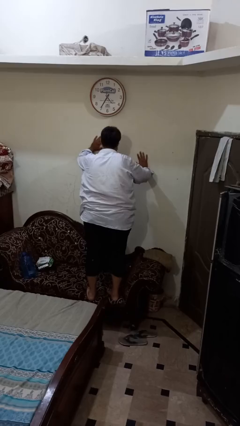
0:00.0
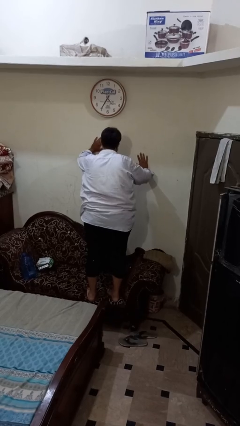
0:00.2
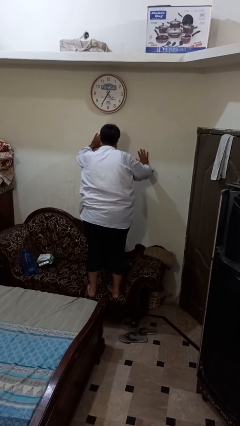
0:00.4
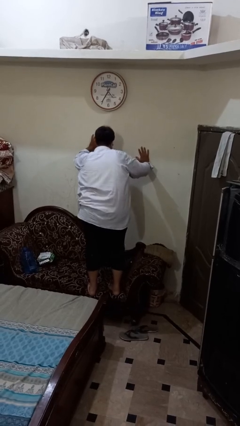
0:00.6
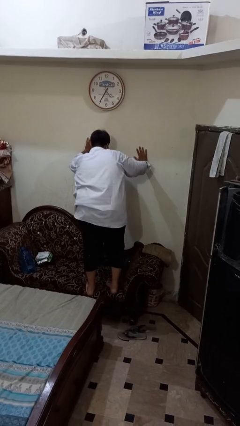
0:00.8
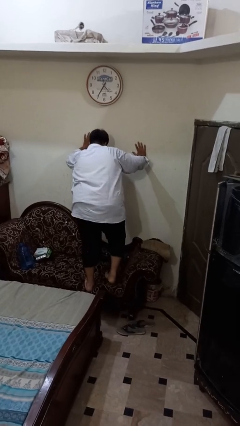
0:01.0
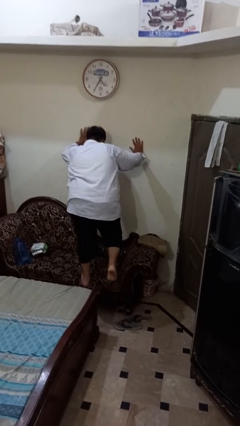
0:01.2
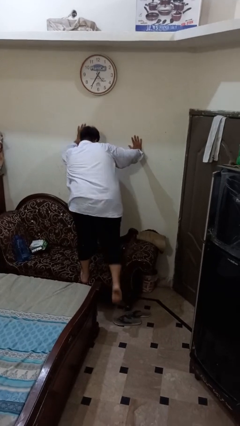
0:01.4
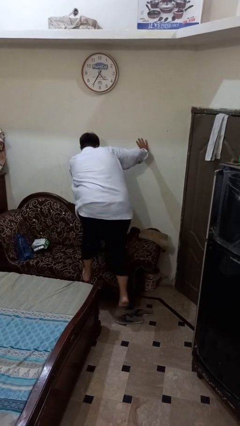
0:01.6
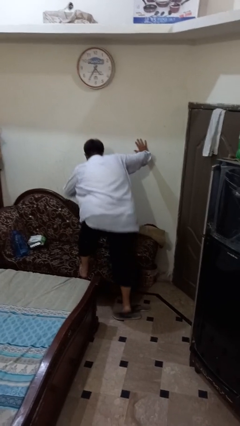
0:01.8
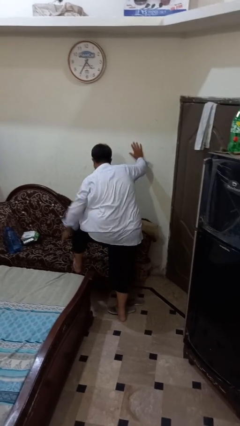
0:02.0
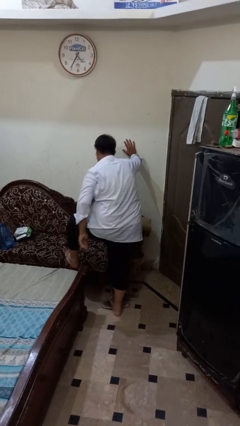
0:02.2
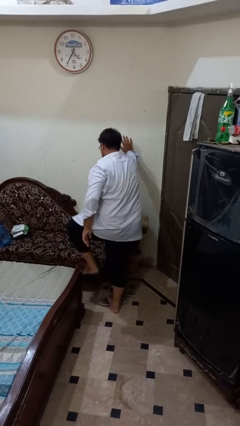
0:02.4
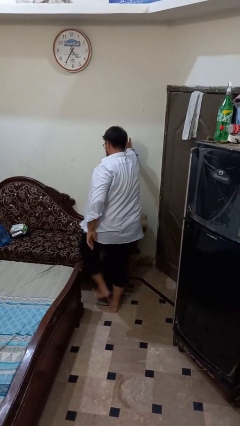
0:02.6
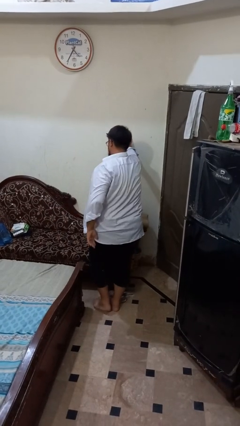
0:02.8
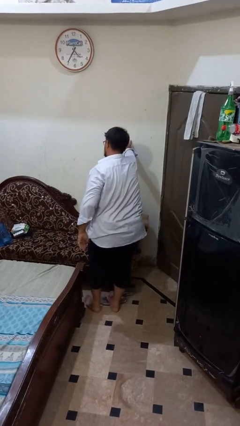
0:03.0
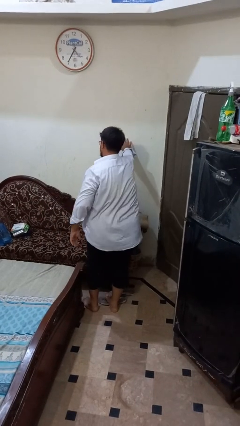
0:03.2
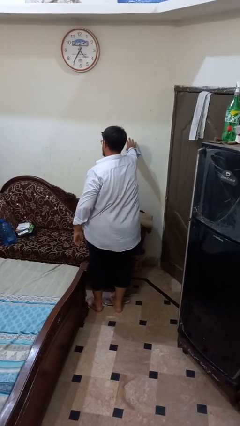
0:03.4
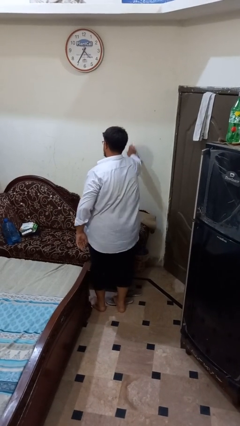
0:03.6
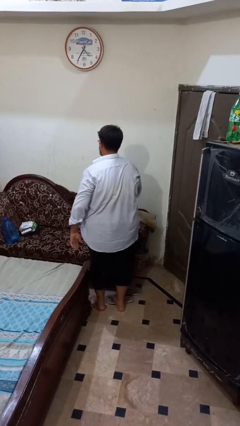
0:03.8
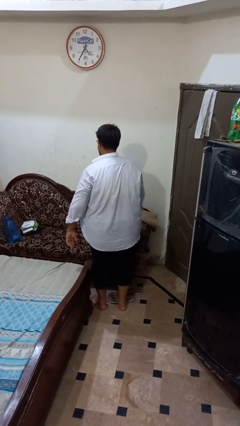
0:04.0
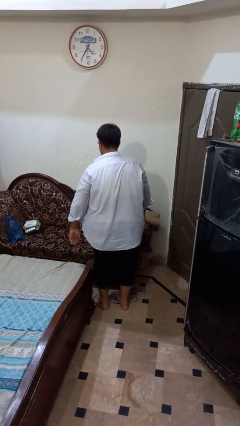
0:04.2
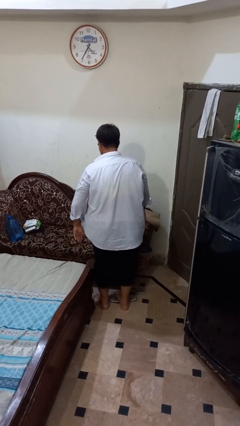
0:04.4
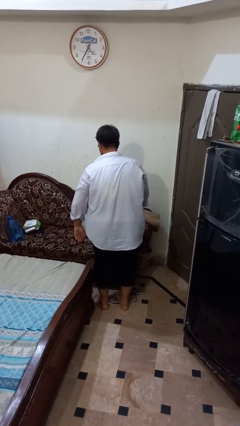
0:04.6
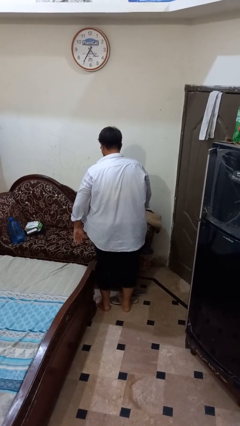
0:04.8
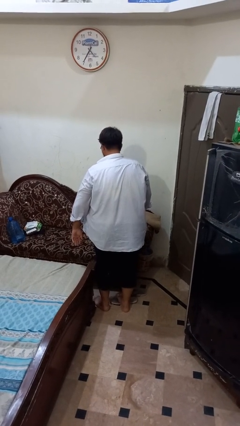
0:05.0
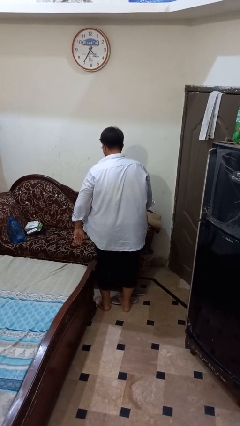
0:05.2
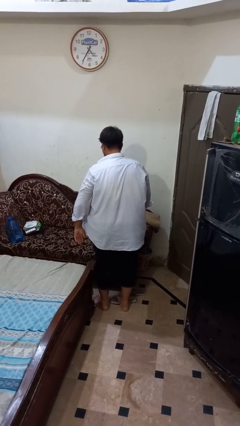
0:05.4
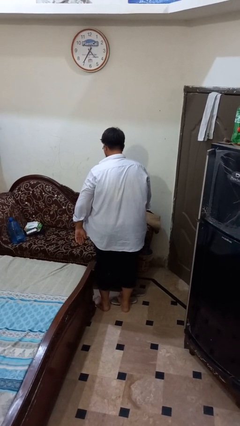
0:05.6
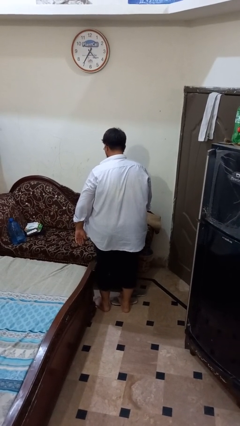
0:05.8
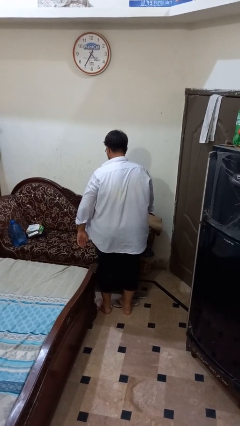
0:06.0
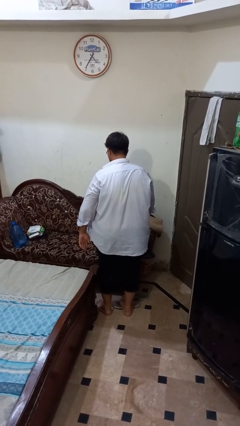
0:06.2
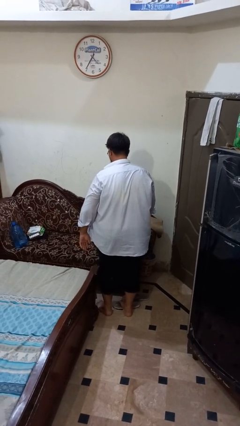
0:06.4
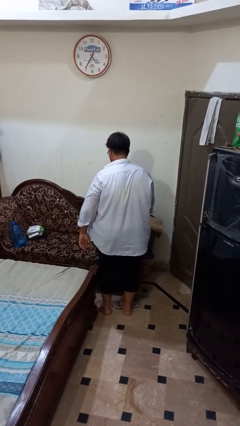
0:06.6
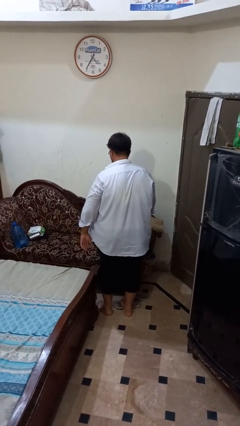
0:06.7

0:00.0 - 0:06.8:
person climbs off couch

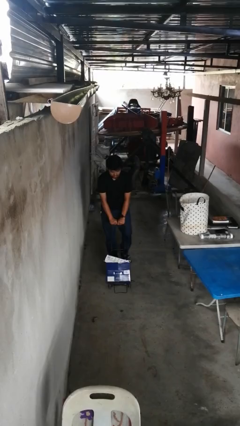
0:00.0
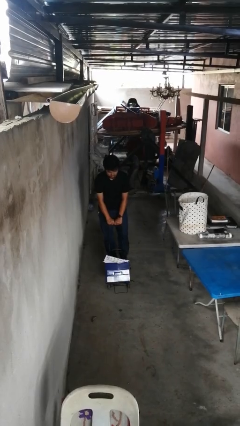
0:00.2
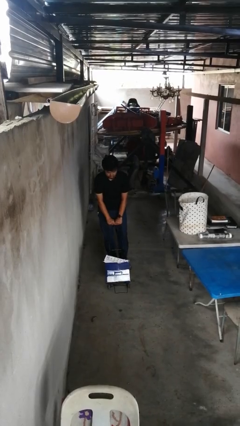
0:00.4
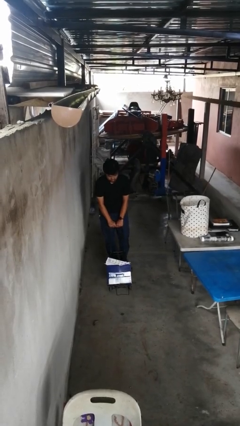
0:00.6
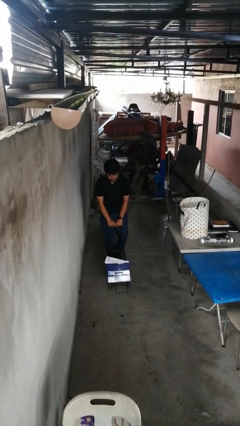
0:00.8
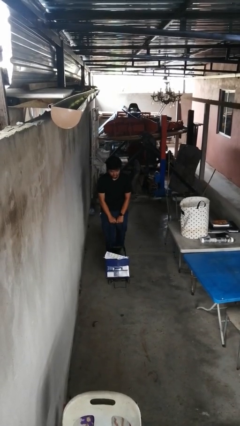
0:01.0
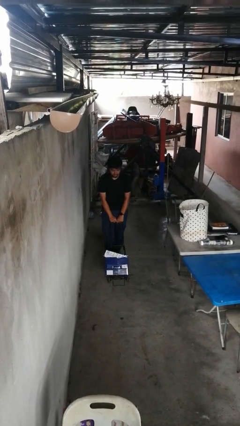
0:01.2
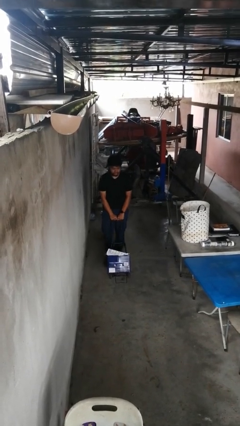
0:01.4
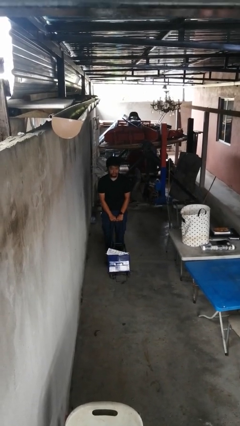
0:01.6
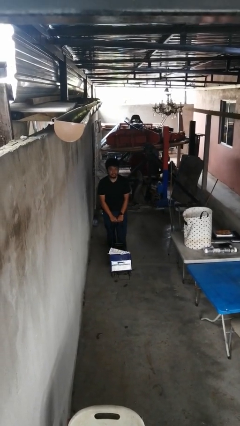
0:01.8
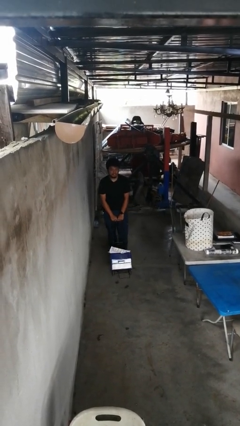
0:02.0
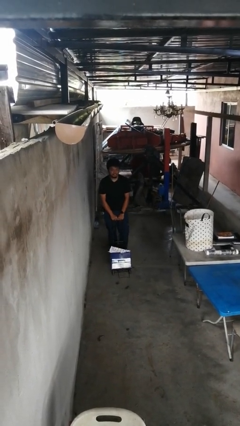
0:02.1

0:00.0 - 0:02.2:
person pulls wheeled cart

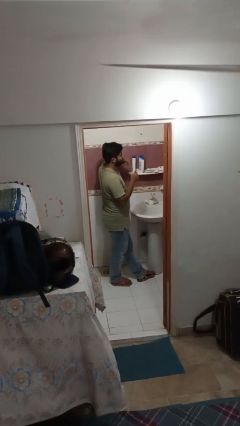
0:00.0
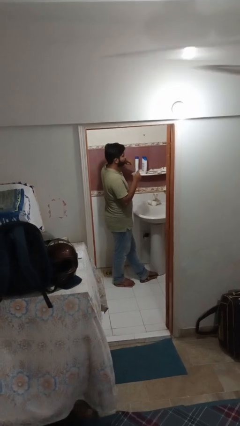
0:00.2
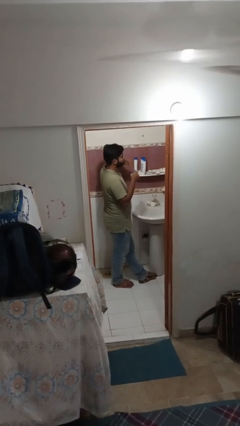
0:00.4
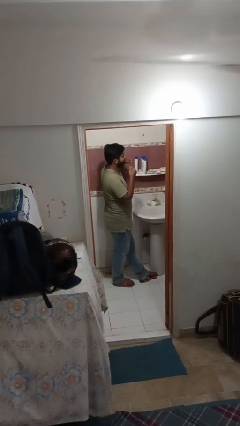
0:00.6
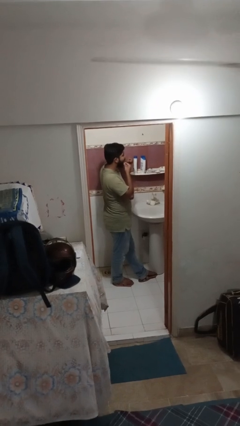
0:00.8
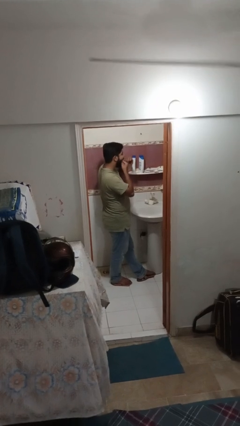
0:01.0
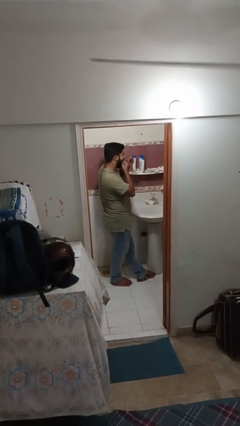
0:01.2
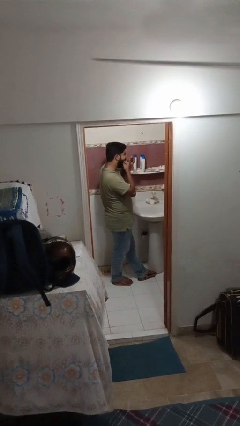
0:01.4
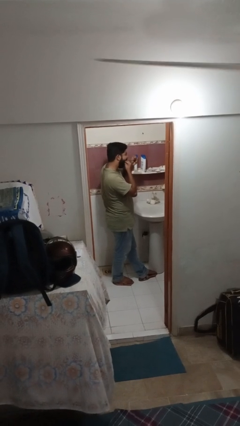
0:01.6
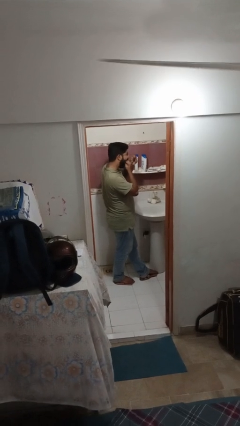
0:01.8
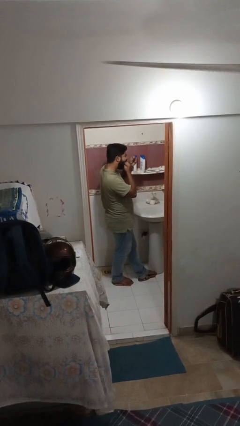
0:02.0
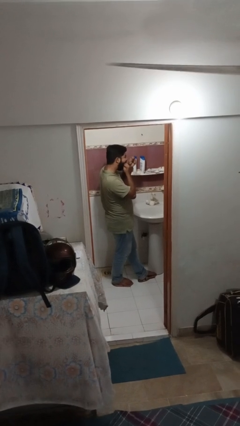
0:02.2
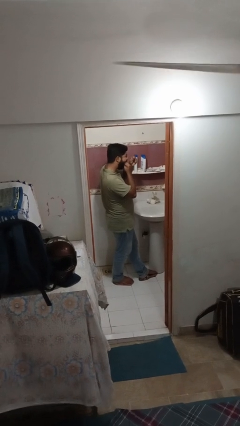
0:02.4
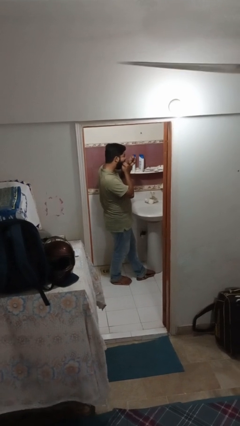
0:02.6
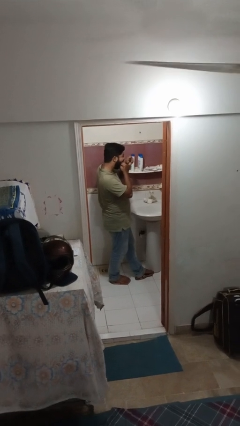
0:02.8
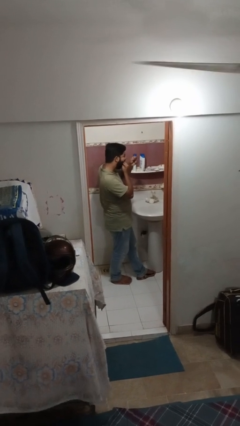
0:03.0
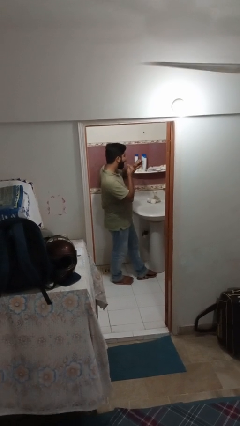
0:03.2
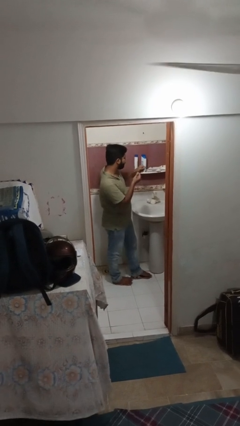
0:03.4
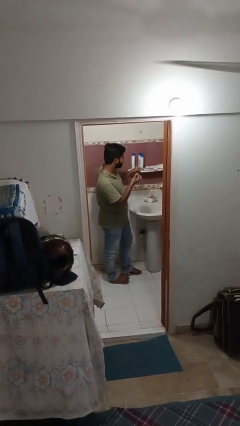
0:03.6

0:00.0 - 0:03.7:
person flosses

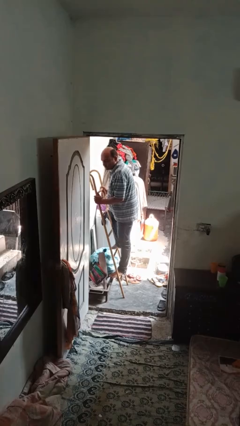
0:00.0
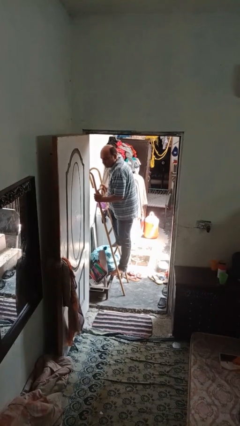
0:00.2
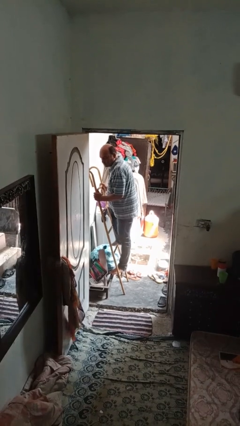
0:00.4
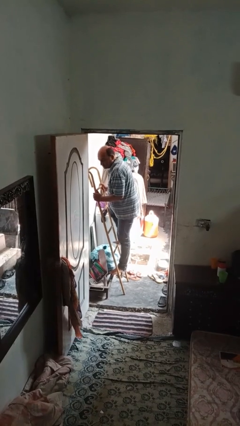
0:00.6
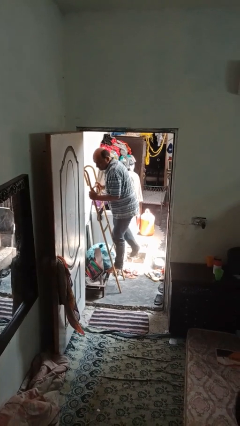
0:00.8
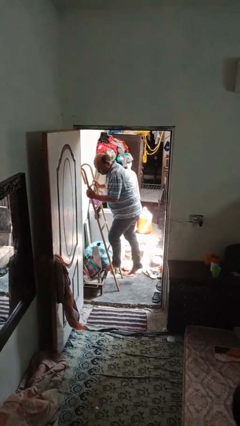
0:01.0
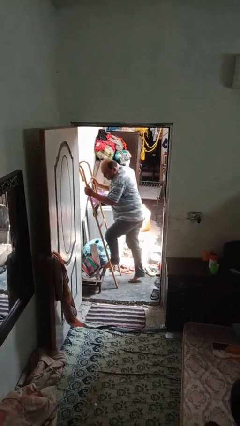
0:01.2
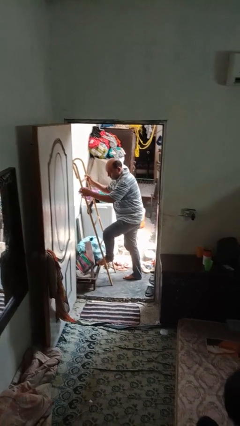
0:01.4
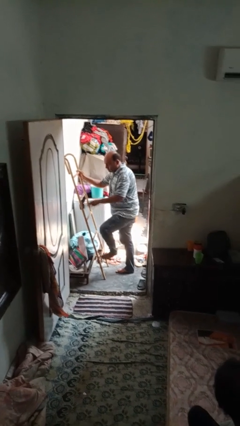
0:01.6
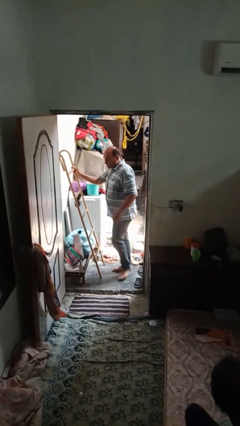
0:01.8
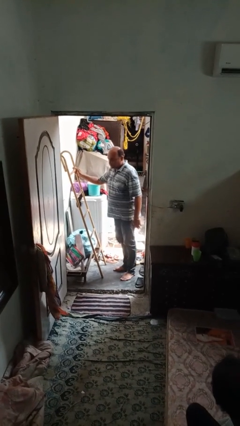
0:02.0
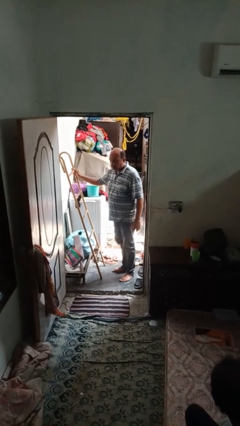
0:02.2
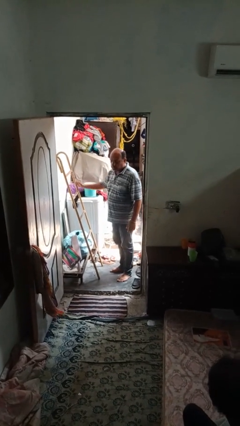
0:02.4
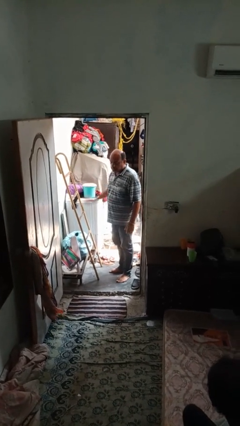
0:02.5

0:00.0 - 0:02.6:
person climbs down ladder

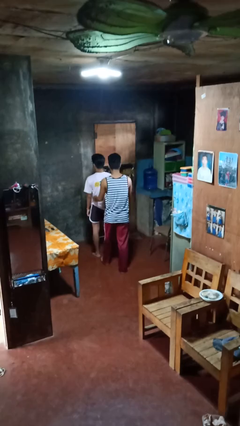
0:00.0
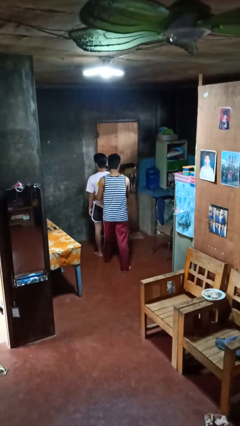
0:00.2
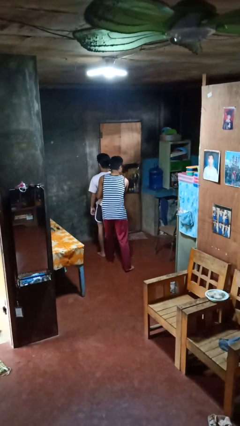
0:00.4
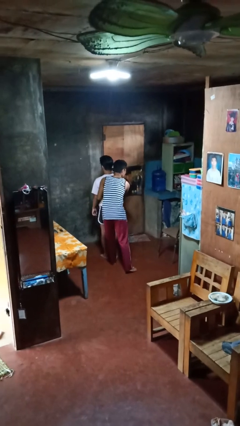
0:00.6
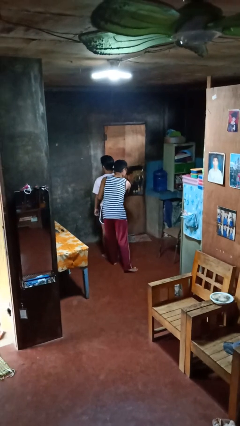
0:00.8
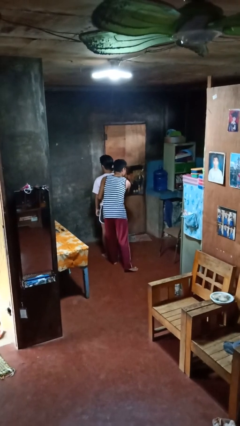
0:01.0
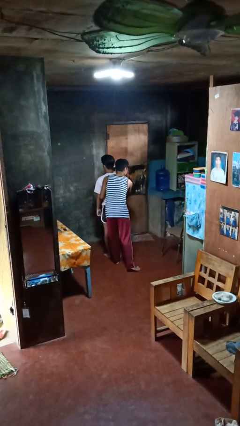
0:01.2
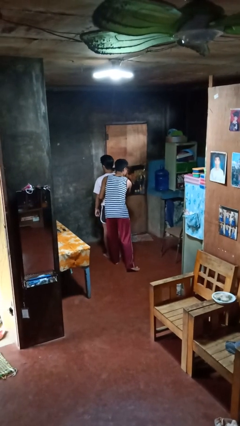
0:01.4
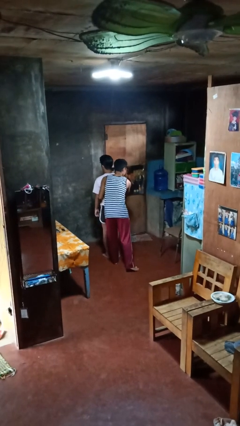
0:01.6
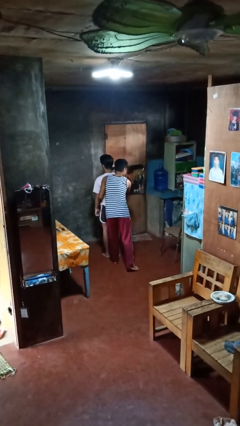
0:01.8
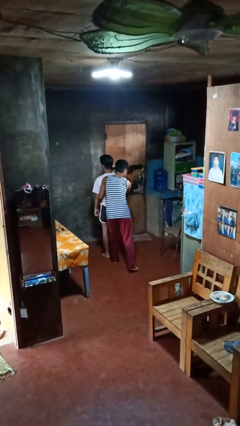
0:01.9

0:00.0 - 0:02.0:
person hugs person from behind

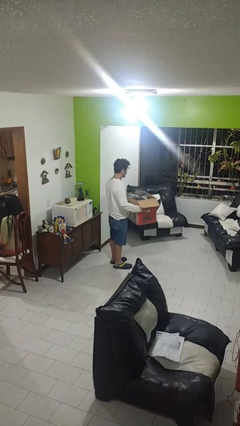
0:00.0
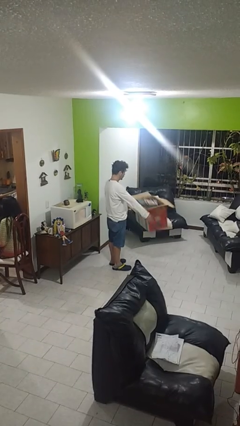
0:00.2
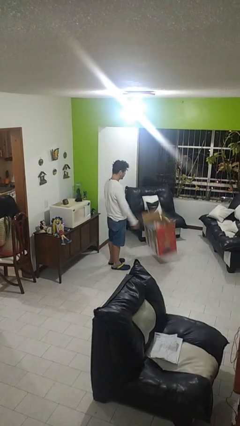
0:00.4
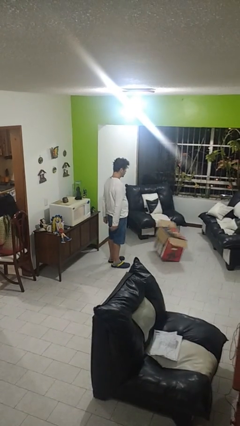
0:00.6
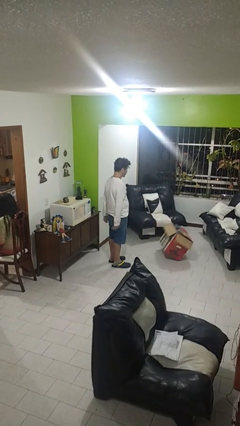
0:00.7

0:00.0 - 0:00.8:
person unloads box onto floor
